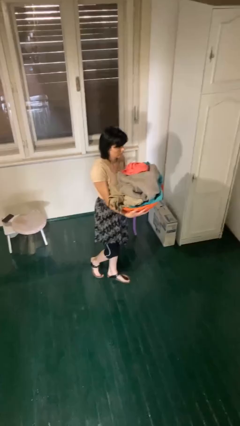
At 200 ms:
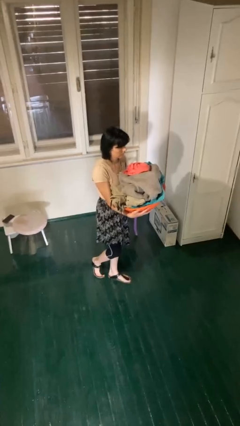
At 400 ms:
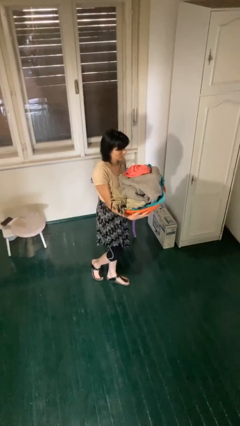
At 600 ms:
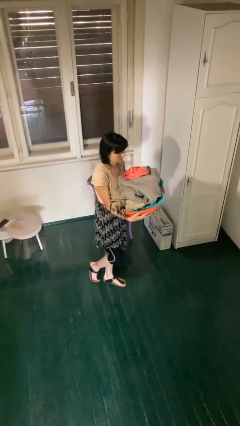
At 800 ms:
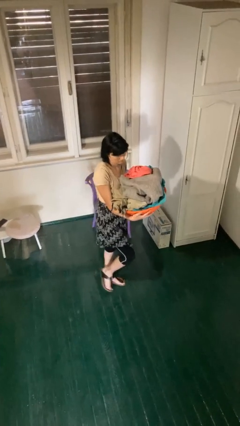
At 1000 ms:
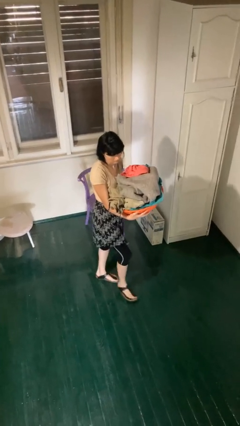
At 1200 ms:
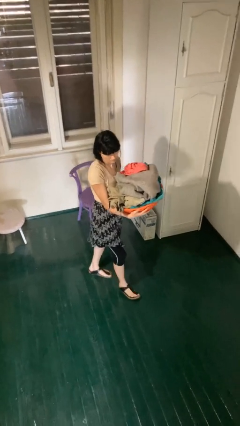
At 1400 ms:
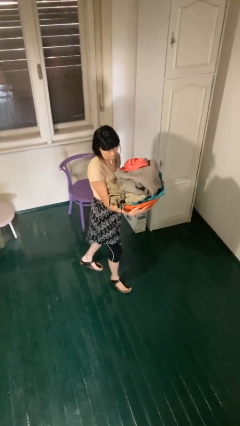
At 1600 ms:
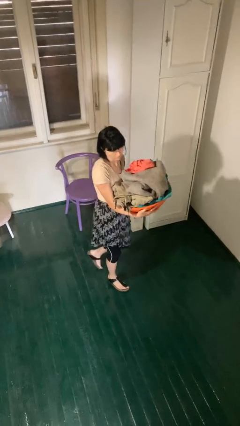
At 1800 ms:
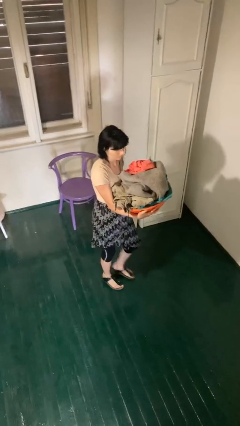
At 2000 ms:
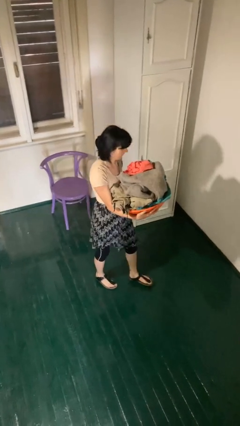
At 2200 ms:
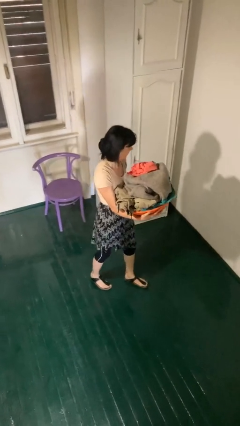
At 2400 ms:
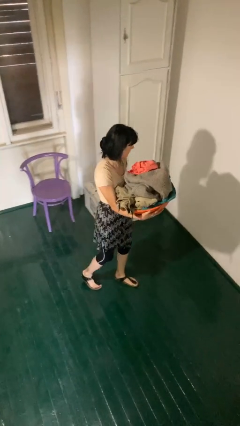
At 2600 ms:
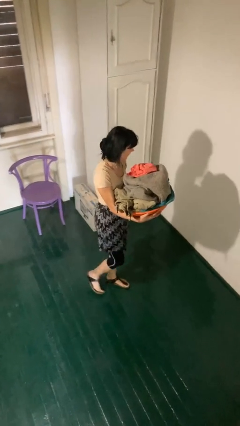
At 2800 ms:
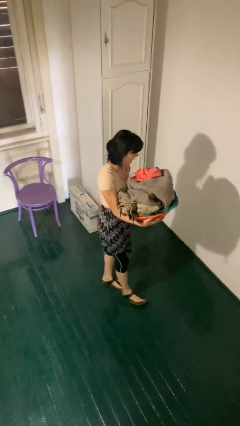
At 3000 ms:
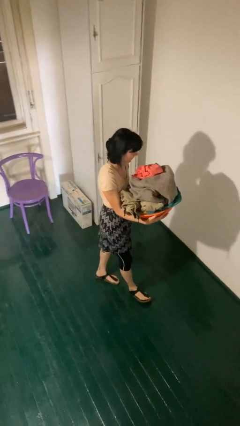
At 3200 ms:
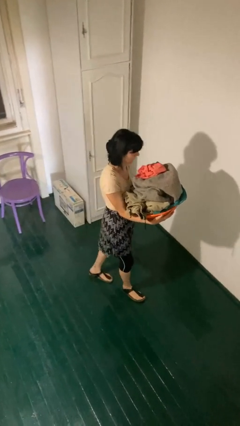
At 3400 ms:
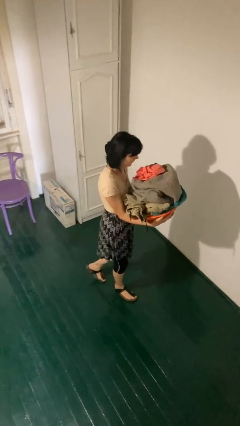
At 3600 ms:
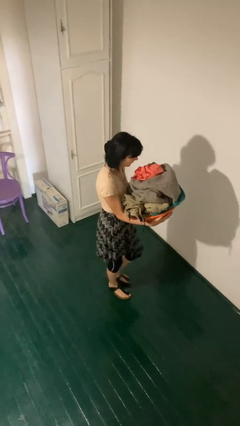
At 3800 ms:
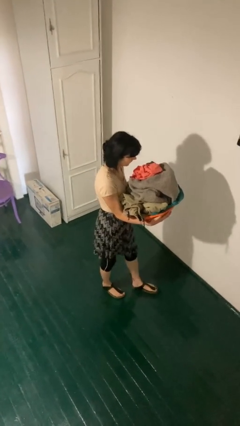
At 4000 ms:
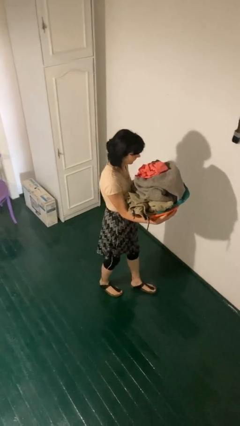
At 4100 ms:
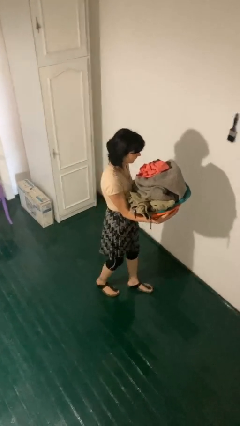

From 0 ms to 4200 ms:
person carries laundry basket

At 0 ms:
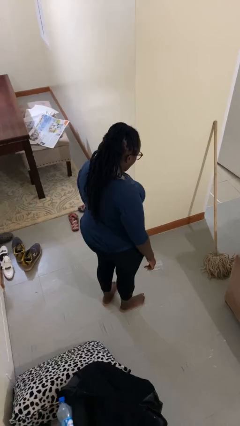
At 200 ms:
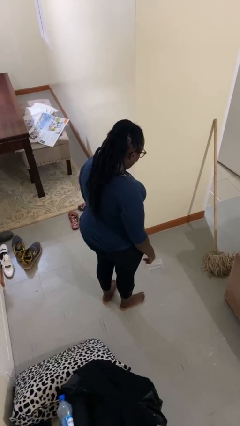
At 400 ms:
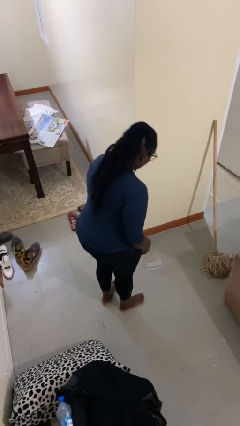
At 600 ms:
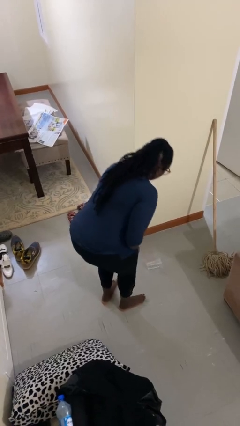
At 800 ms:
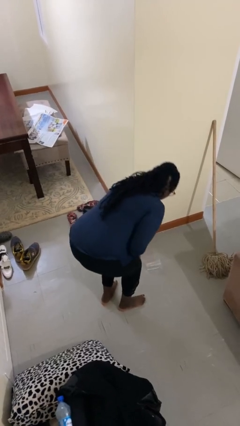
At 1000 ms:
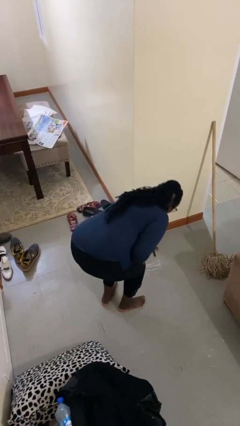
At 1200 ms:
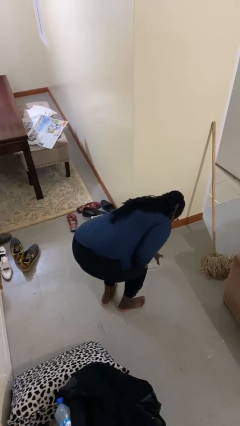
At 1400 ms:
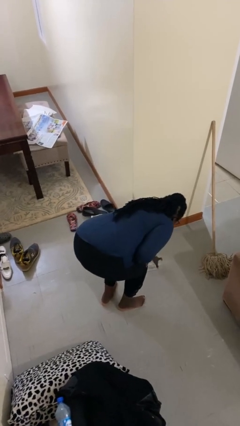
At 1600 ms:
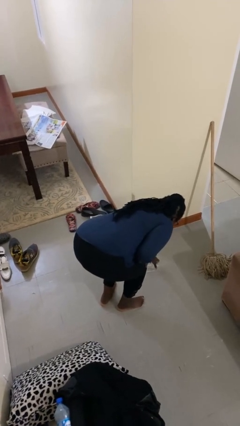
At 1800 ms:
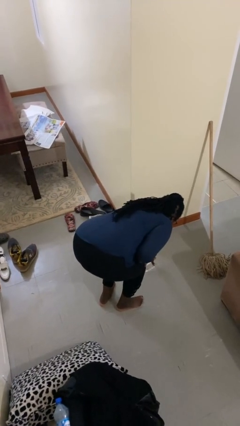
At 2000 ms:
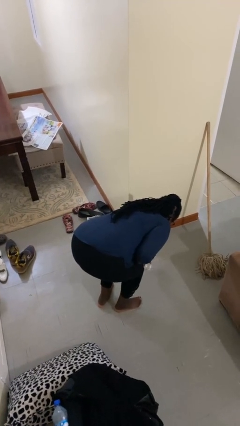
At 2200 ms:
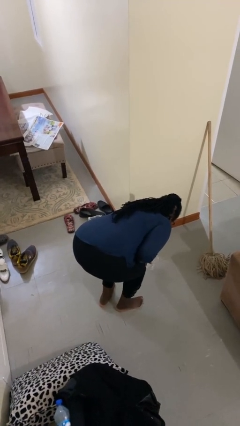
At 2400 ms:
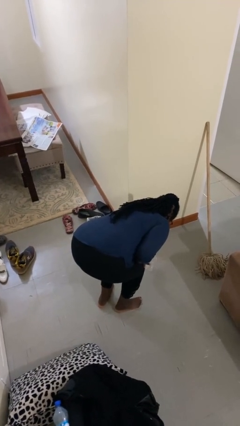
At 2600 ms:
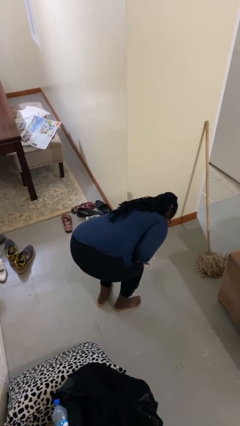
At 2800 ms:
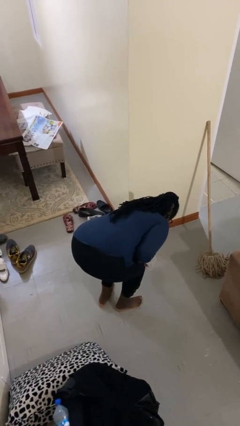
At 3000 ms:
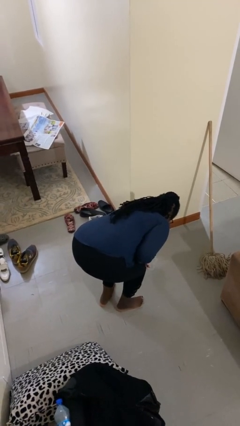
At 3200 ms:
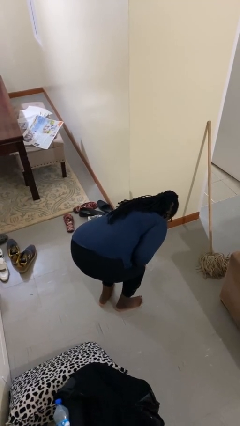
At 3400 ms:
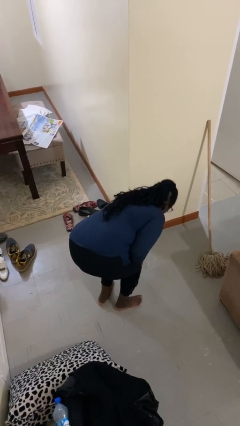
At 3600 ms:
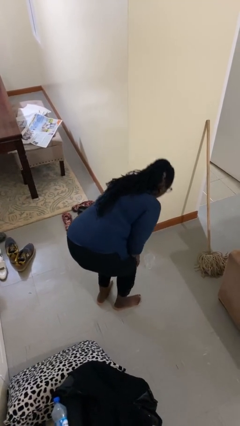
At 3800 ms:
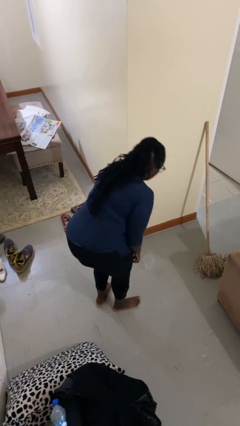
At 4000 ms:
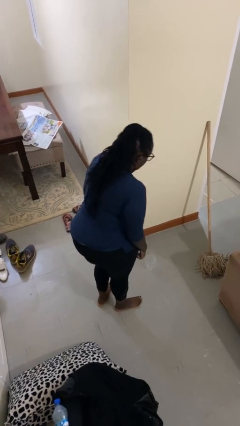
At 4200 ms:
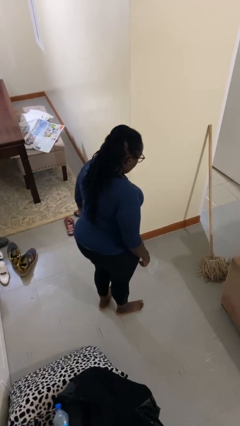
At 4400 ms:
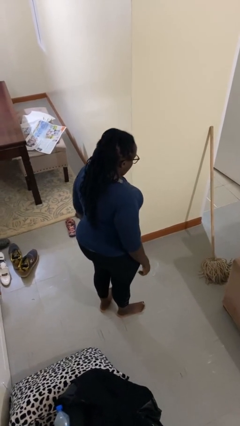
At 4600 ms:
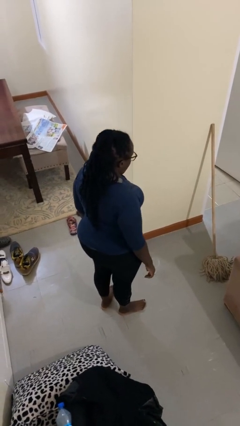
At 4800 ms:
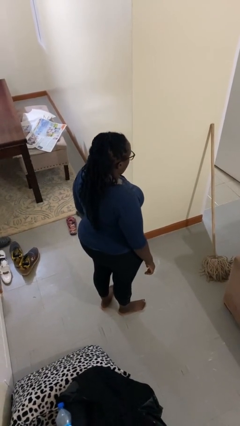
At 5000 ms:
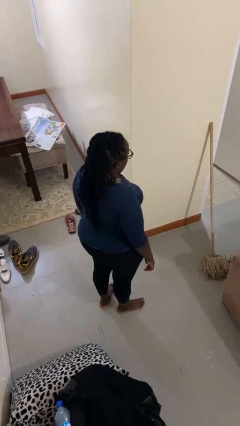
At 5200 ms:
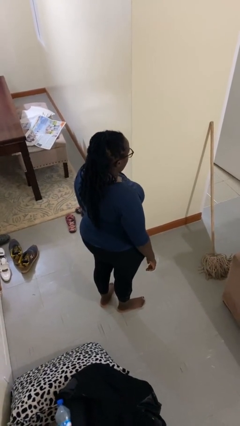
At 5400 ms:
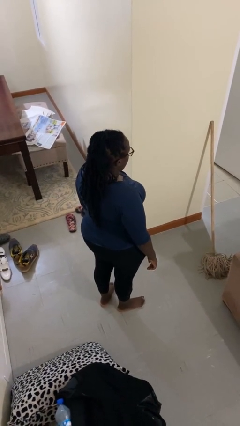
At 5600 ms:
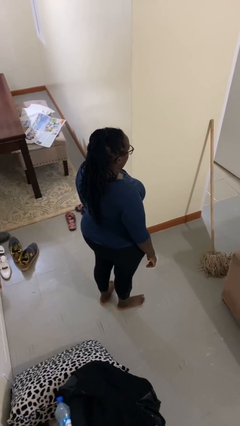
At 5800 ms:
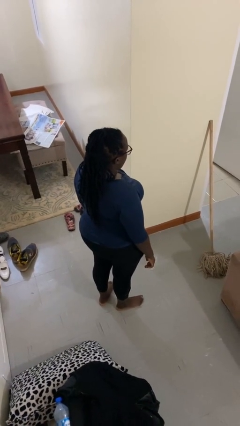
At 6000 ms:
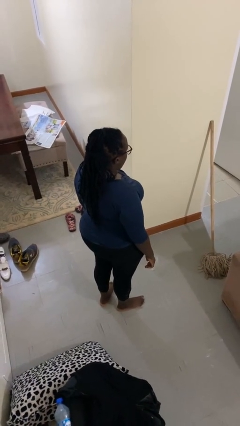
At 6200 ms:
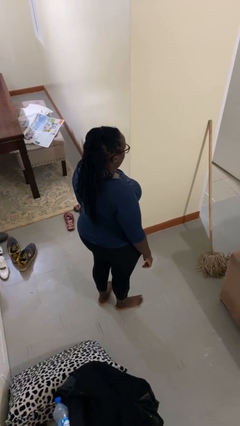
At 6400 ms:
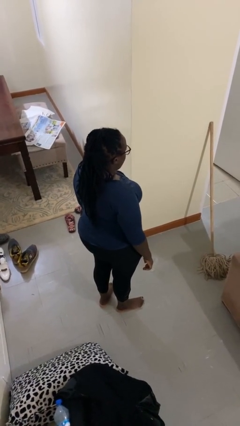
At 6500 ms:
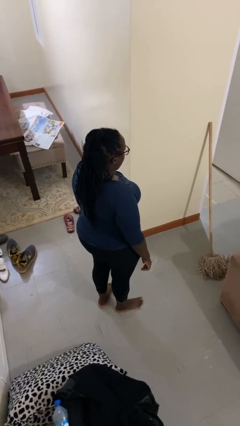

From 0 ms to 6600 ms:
person sets upright glass

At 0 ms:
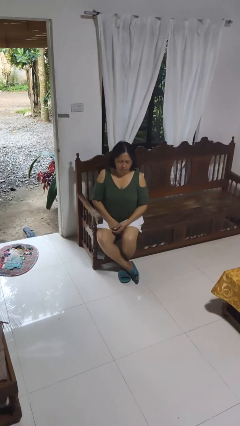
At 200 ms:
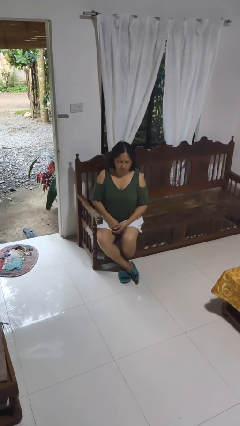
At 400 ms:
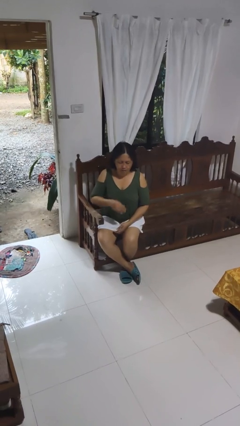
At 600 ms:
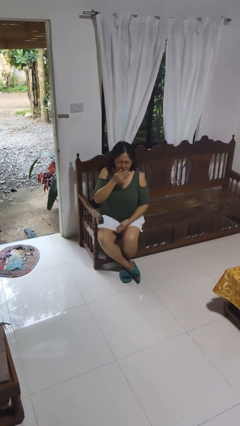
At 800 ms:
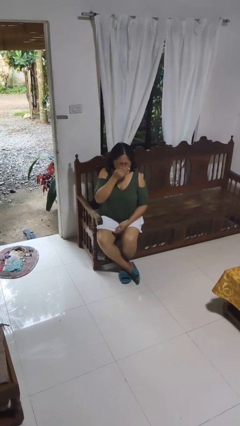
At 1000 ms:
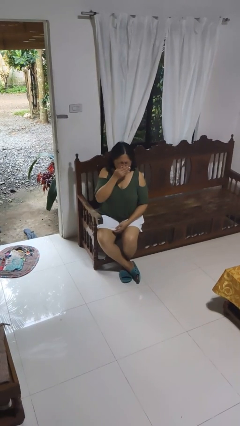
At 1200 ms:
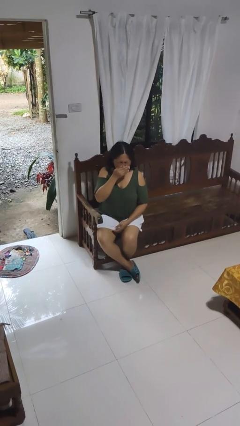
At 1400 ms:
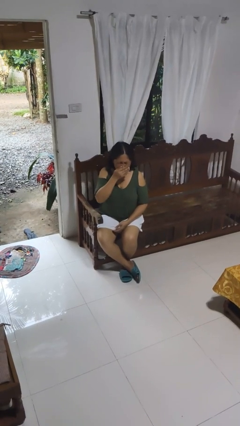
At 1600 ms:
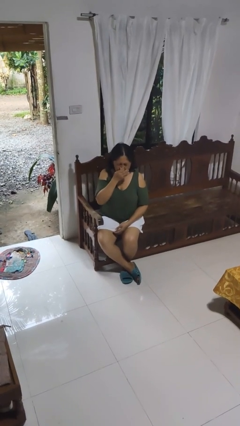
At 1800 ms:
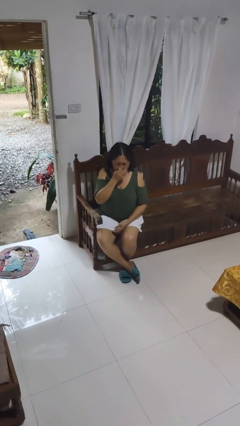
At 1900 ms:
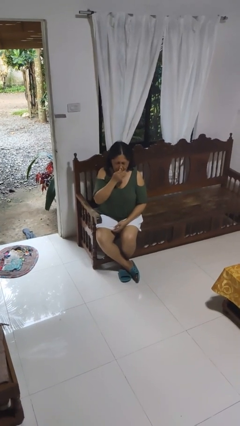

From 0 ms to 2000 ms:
person sneezes into hand

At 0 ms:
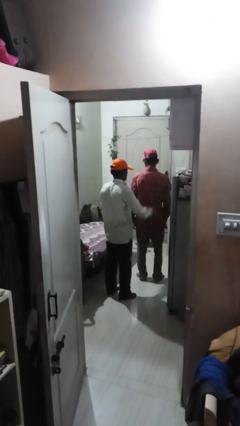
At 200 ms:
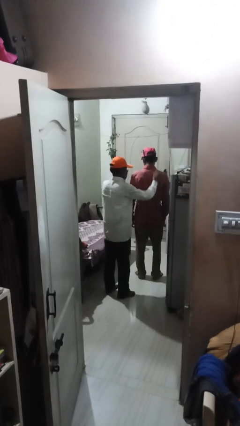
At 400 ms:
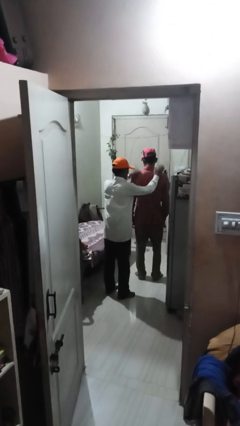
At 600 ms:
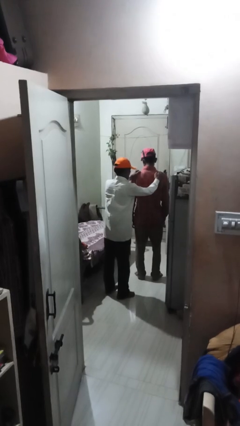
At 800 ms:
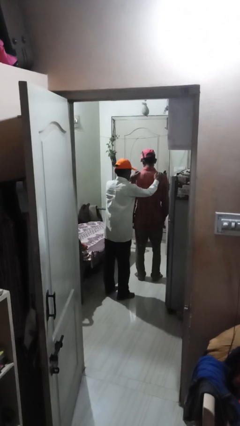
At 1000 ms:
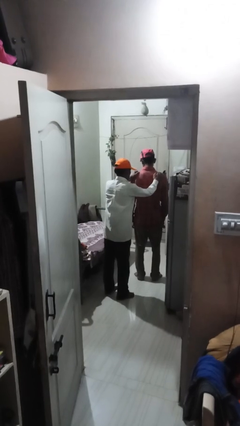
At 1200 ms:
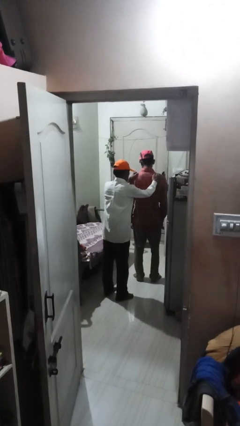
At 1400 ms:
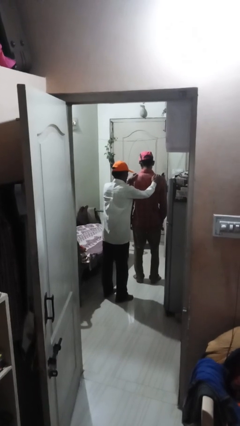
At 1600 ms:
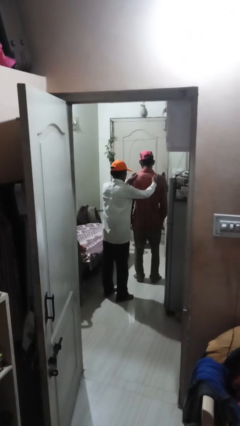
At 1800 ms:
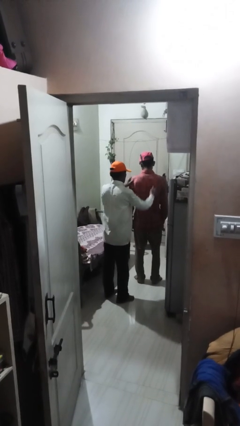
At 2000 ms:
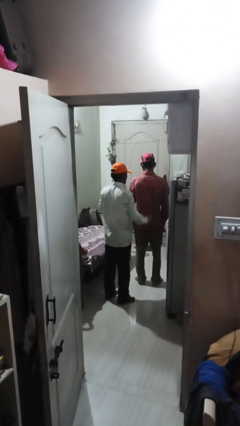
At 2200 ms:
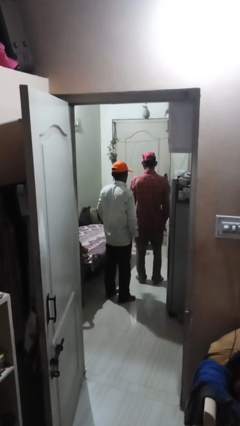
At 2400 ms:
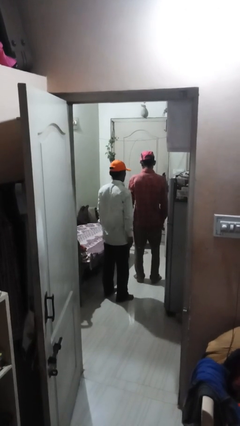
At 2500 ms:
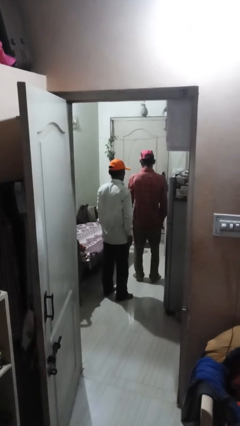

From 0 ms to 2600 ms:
person touches back of person

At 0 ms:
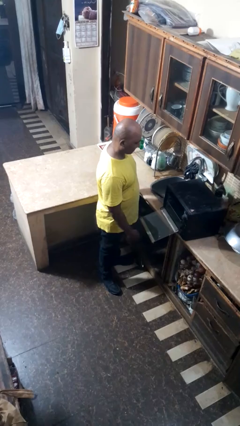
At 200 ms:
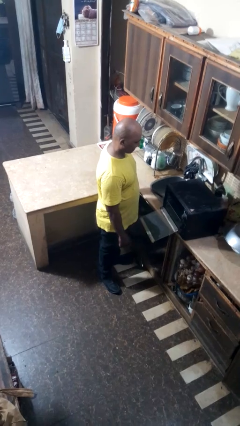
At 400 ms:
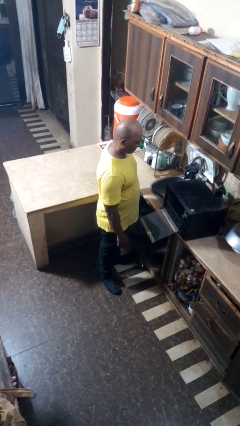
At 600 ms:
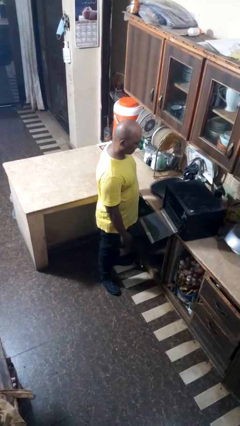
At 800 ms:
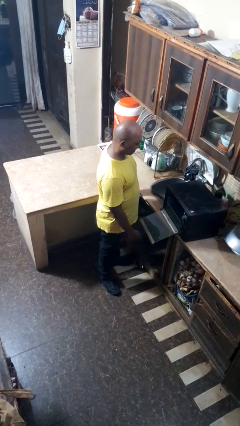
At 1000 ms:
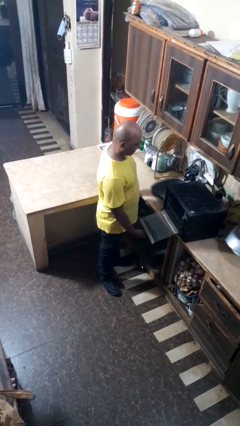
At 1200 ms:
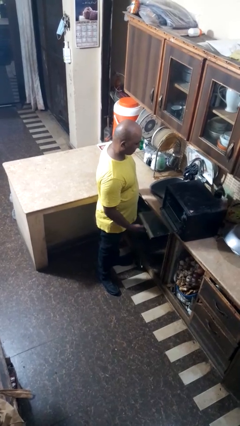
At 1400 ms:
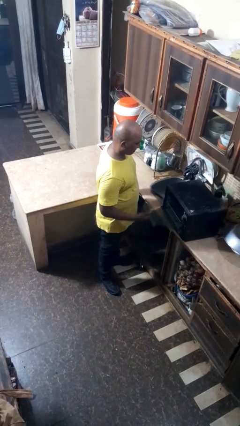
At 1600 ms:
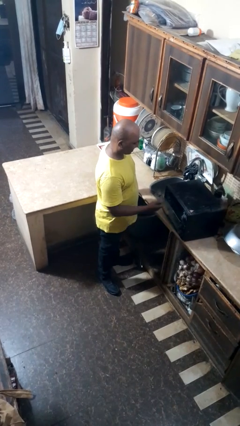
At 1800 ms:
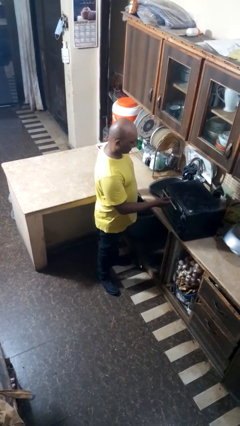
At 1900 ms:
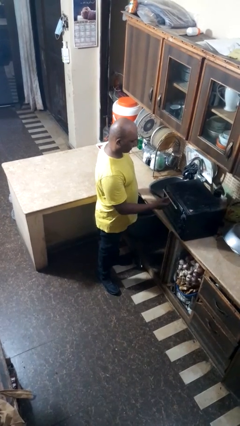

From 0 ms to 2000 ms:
person closes oven door

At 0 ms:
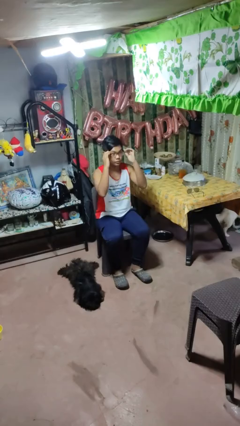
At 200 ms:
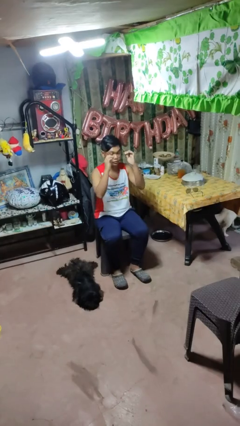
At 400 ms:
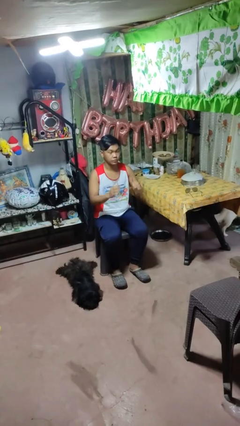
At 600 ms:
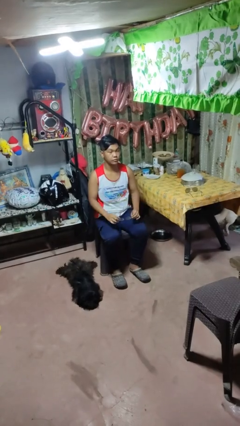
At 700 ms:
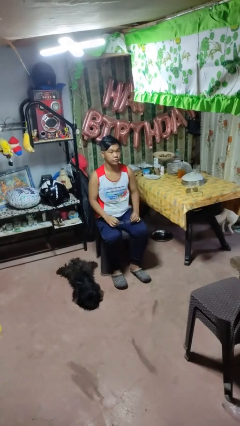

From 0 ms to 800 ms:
person takes off glasses
